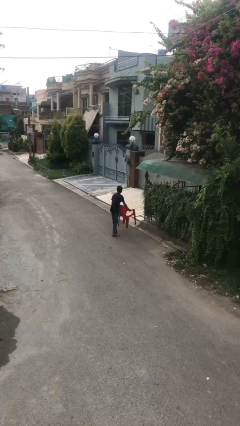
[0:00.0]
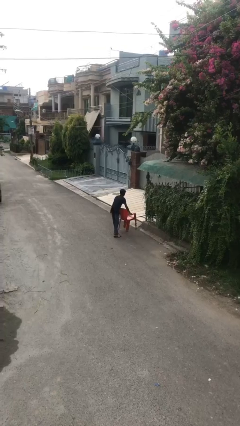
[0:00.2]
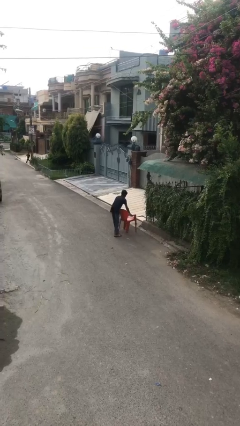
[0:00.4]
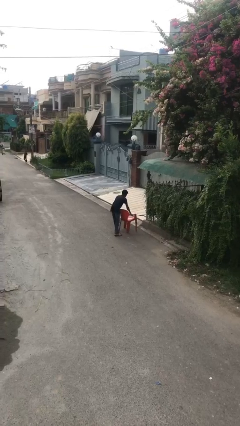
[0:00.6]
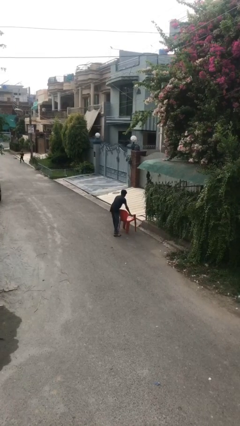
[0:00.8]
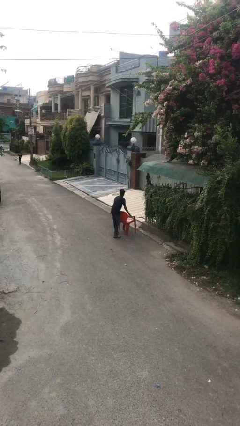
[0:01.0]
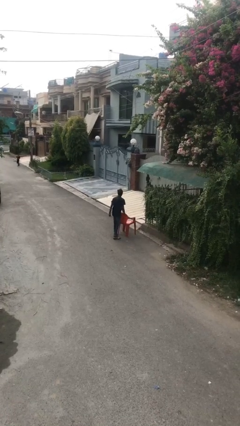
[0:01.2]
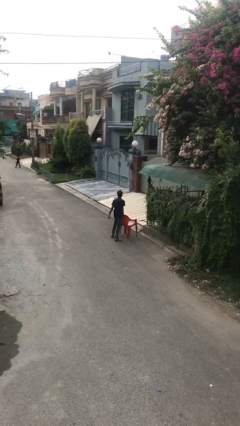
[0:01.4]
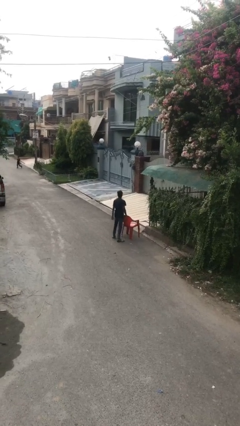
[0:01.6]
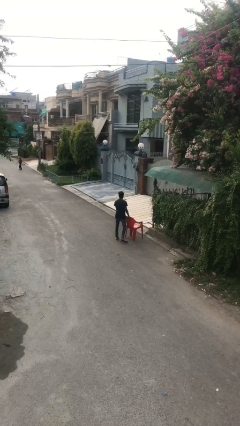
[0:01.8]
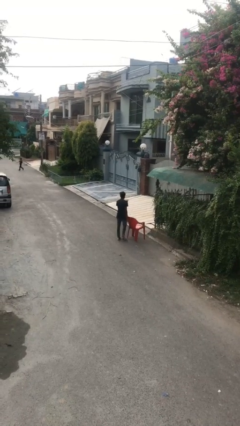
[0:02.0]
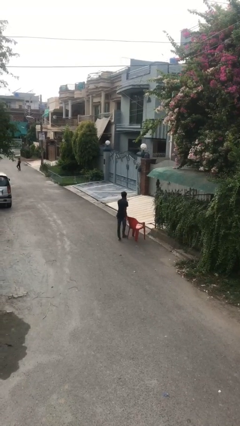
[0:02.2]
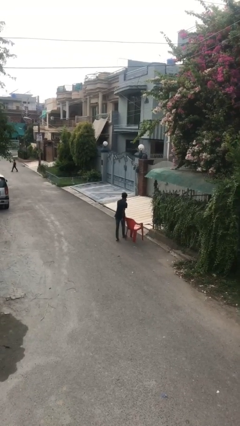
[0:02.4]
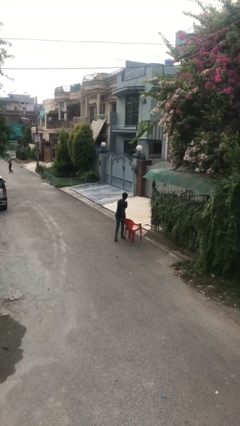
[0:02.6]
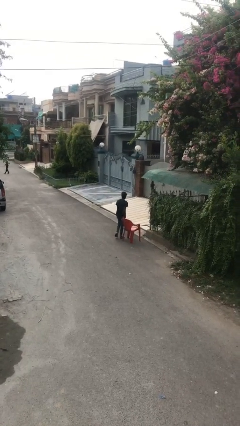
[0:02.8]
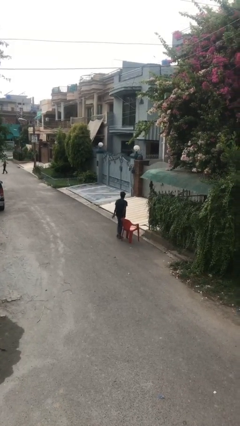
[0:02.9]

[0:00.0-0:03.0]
person puts down object on floor

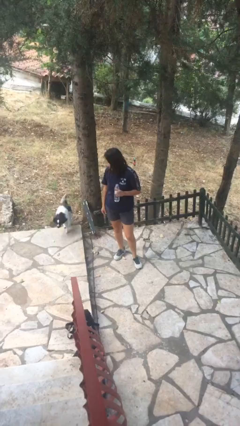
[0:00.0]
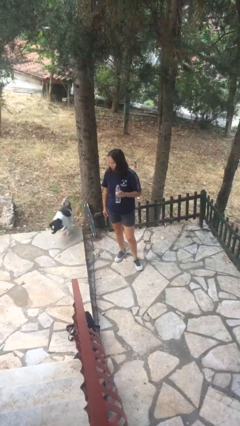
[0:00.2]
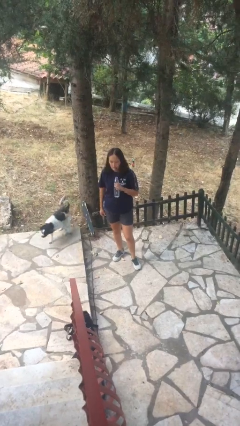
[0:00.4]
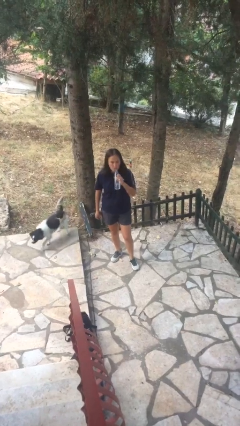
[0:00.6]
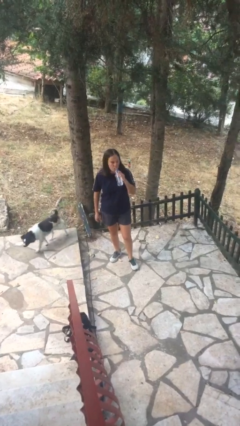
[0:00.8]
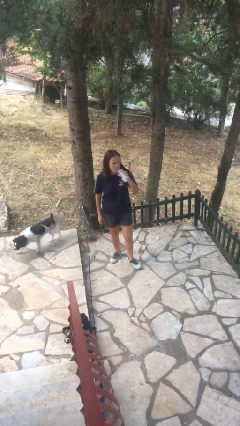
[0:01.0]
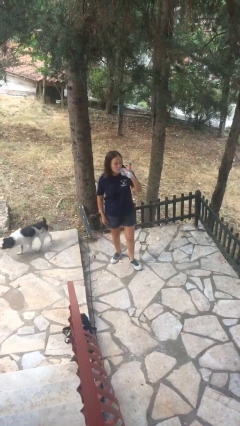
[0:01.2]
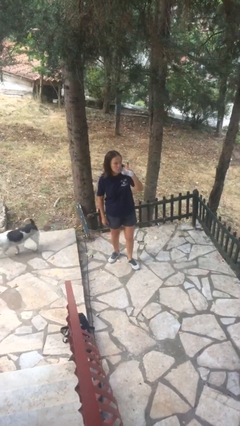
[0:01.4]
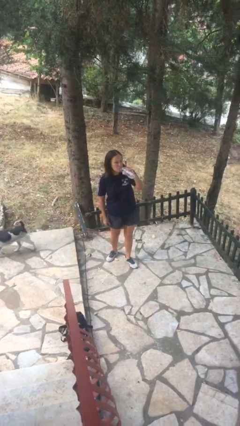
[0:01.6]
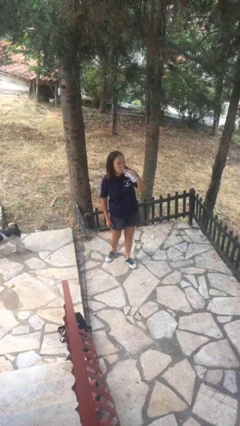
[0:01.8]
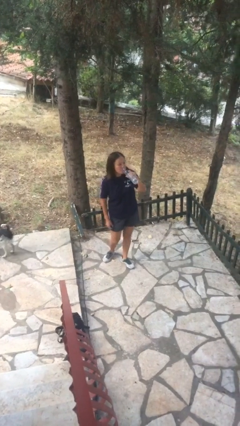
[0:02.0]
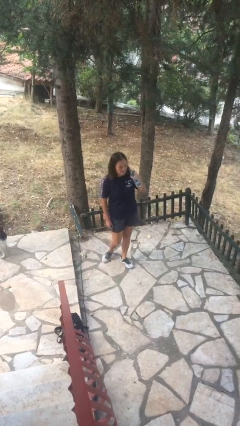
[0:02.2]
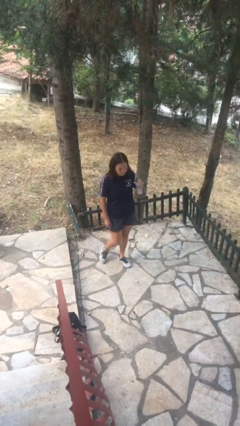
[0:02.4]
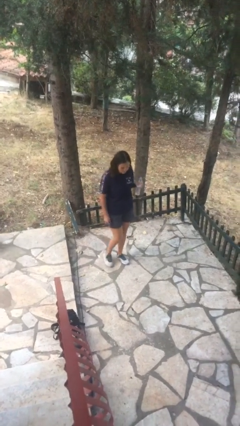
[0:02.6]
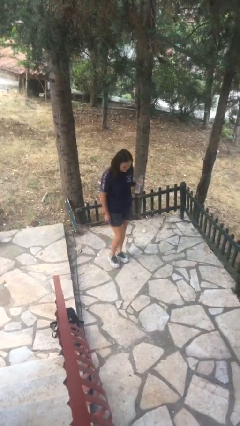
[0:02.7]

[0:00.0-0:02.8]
person drinks from bottle

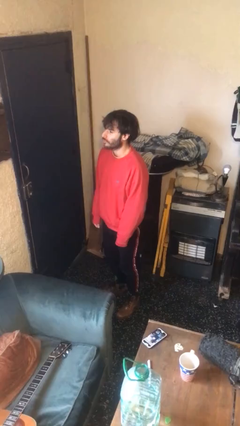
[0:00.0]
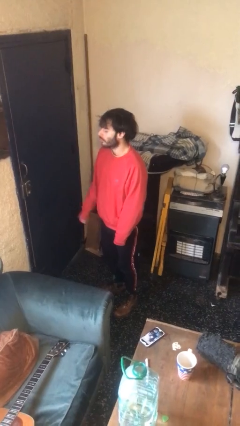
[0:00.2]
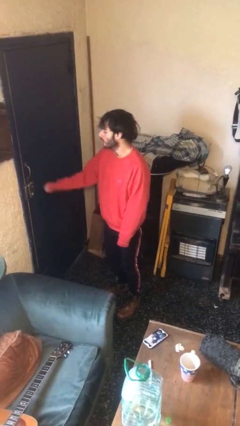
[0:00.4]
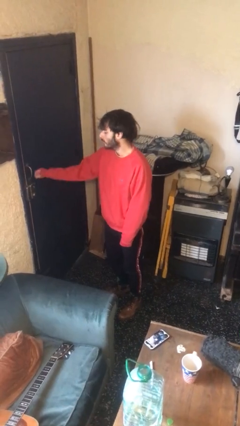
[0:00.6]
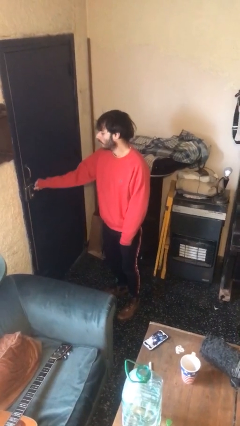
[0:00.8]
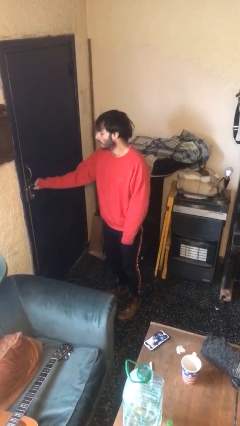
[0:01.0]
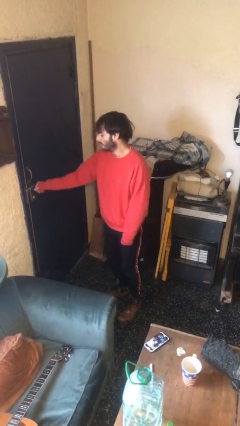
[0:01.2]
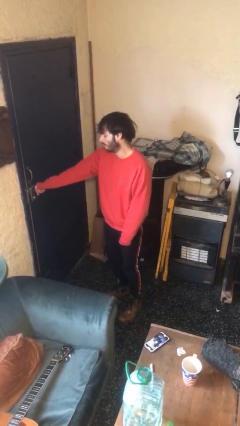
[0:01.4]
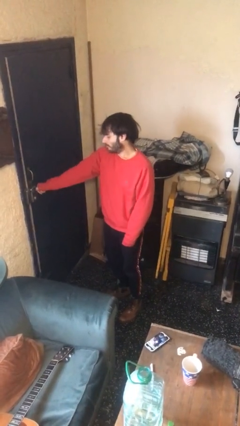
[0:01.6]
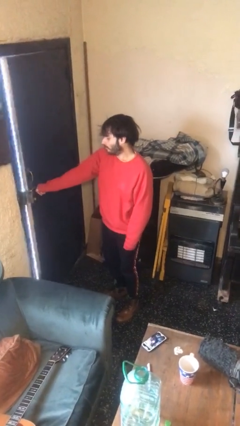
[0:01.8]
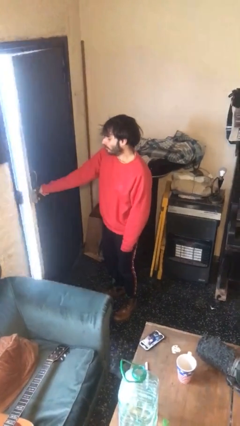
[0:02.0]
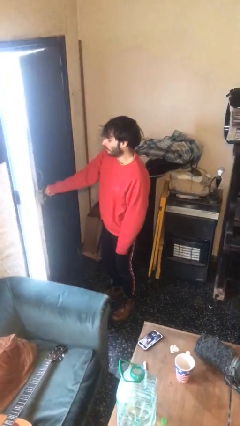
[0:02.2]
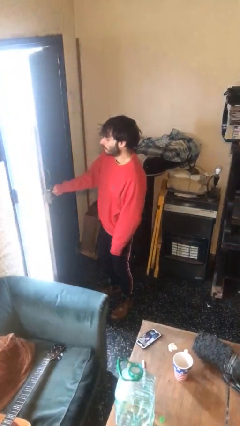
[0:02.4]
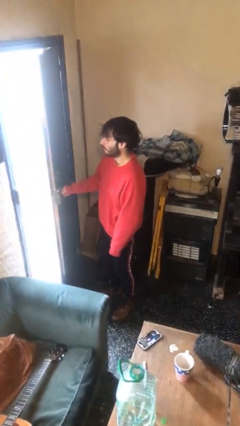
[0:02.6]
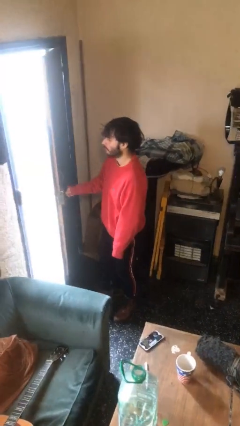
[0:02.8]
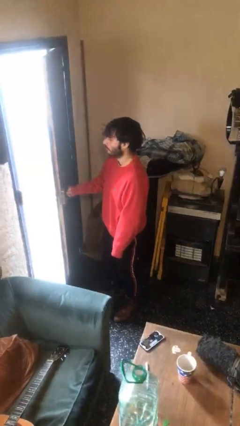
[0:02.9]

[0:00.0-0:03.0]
person opens facility door

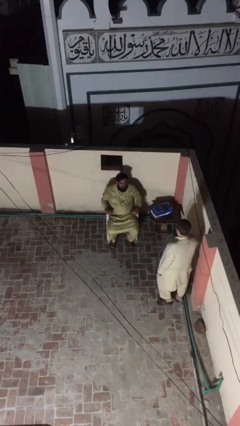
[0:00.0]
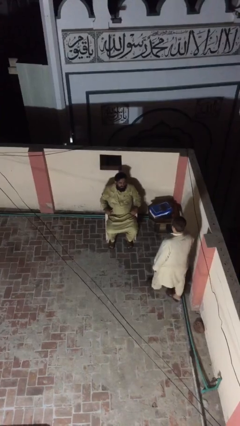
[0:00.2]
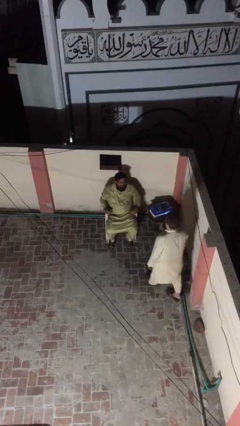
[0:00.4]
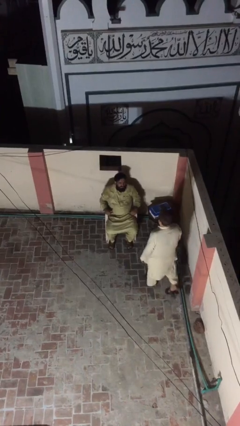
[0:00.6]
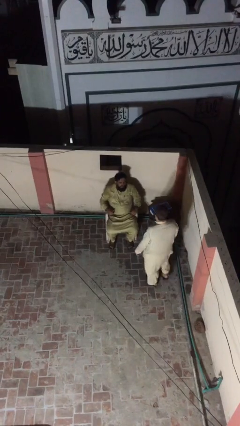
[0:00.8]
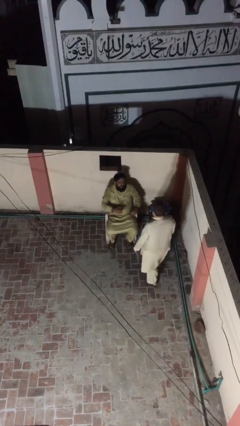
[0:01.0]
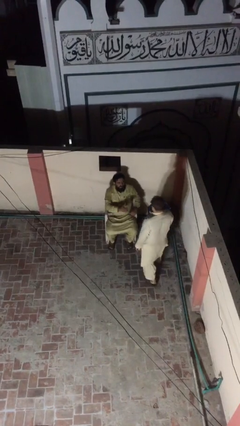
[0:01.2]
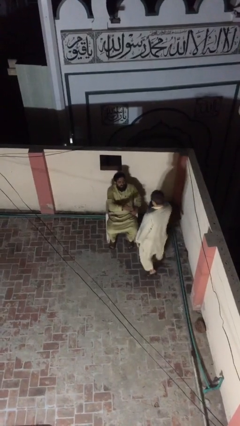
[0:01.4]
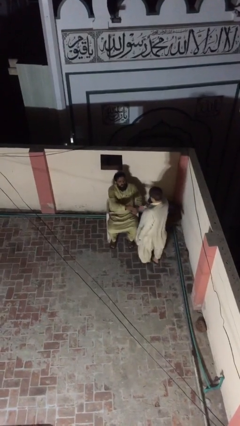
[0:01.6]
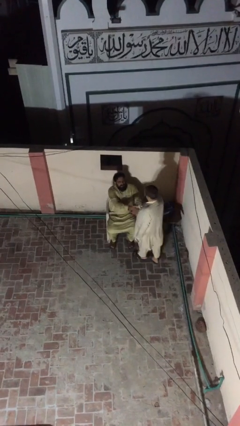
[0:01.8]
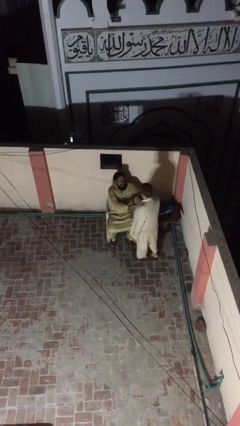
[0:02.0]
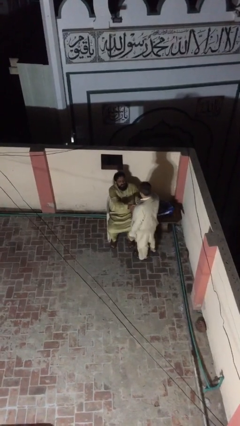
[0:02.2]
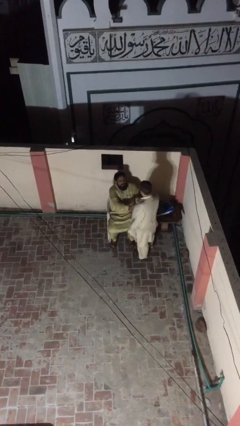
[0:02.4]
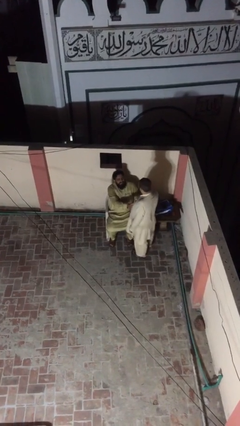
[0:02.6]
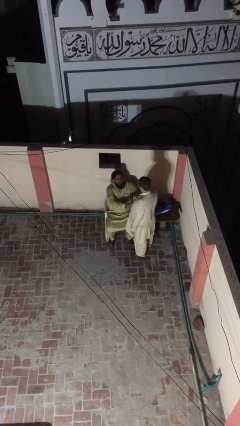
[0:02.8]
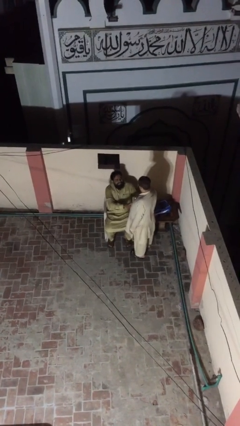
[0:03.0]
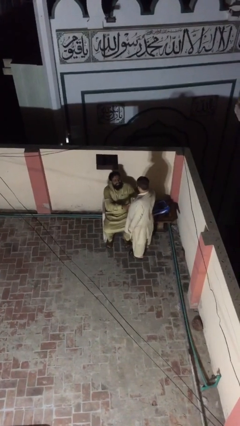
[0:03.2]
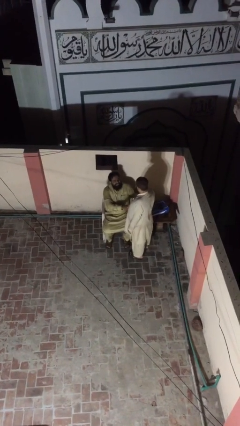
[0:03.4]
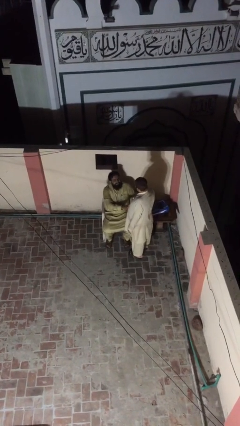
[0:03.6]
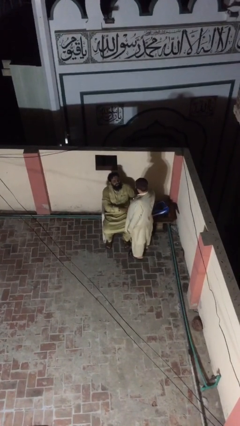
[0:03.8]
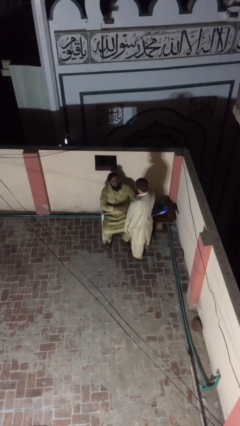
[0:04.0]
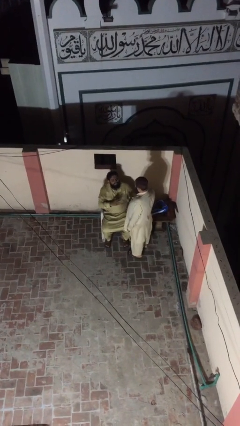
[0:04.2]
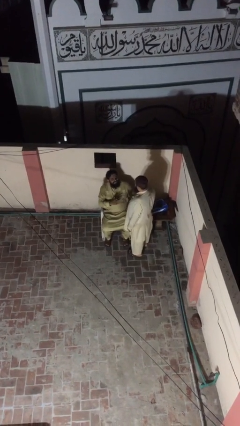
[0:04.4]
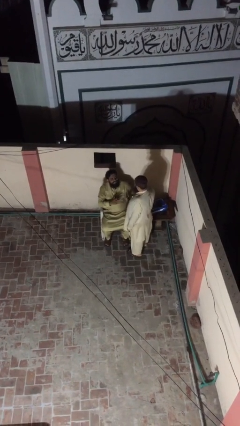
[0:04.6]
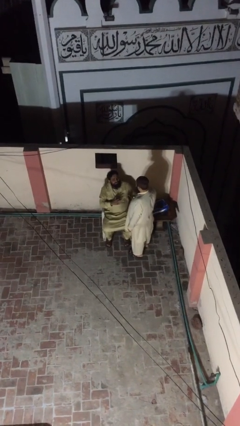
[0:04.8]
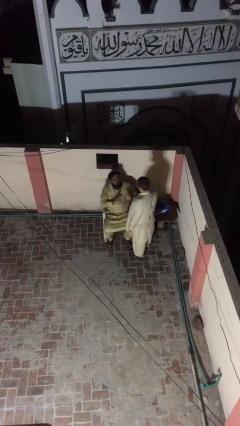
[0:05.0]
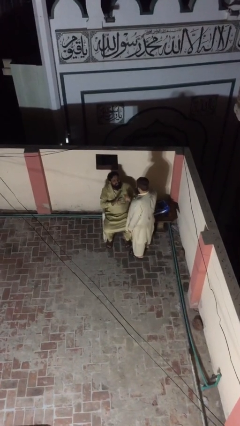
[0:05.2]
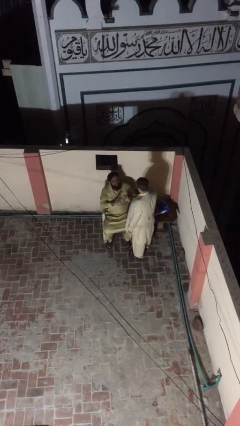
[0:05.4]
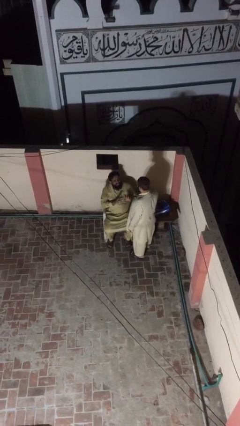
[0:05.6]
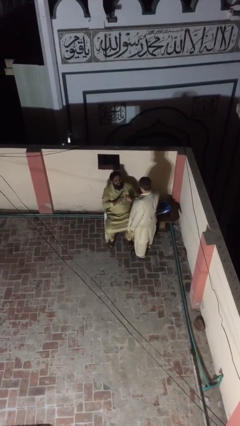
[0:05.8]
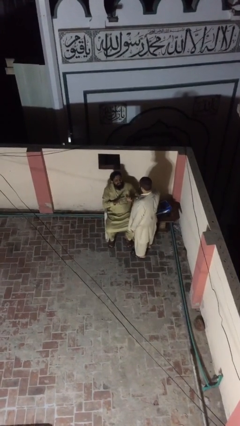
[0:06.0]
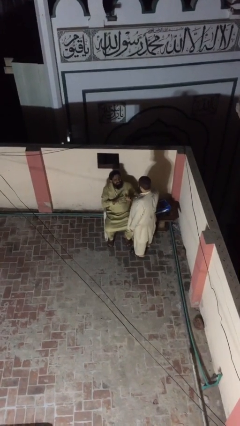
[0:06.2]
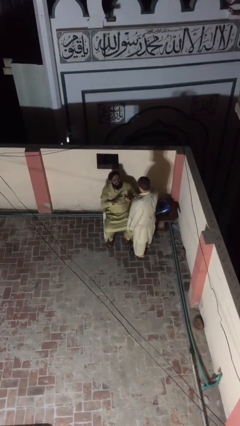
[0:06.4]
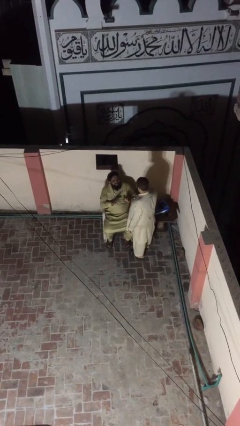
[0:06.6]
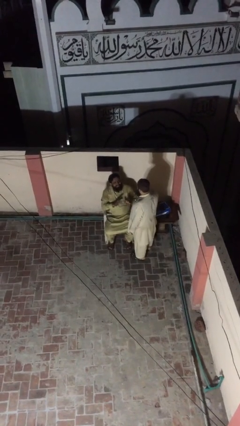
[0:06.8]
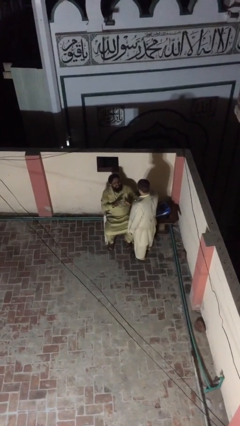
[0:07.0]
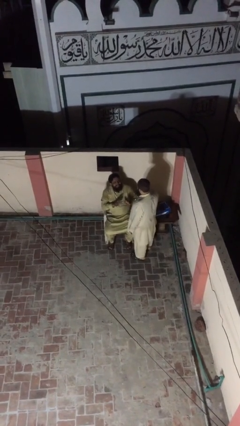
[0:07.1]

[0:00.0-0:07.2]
person shakes hand

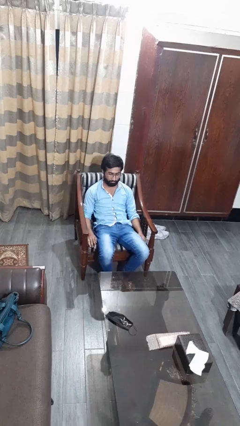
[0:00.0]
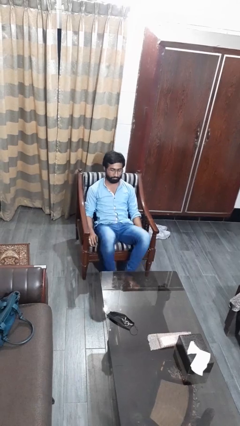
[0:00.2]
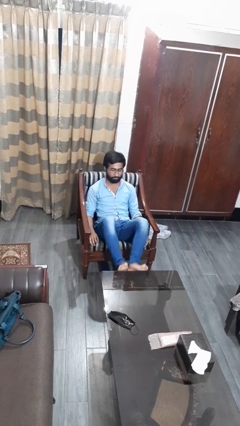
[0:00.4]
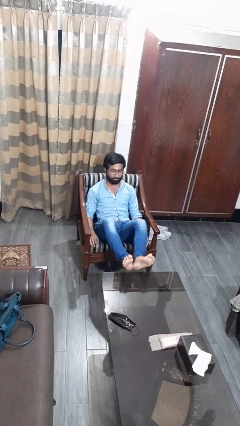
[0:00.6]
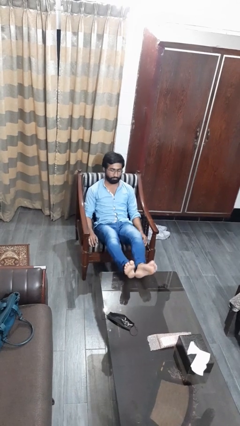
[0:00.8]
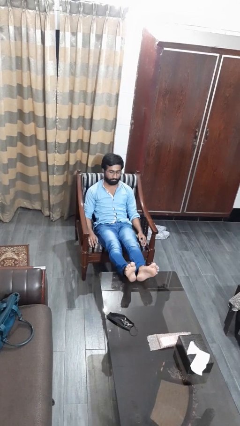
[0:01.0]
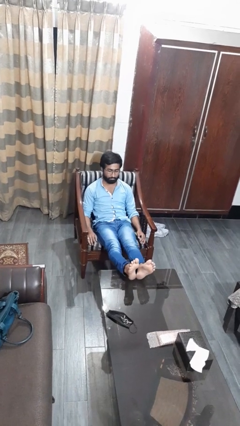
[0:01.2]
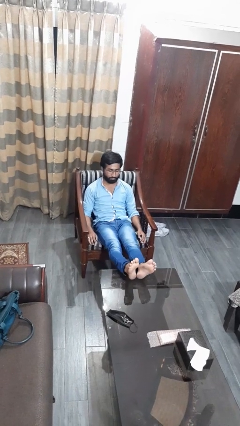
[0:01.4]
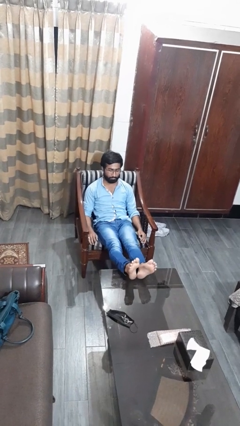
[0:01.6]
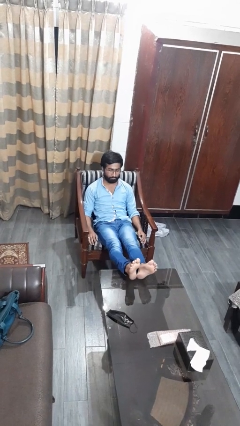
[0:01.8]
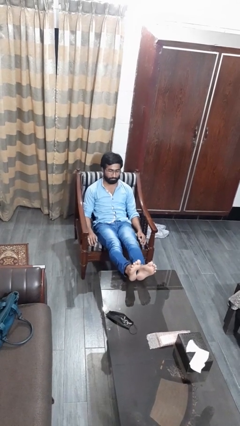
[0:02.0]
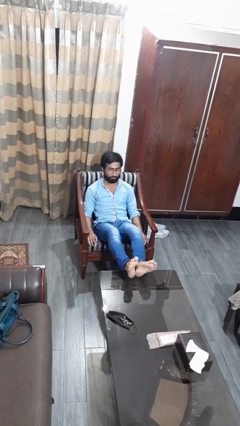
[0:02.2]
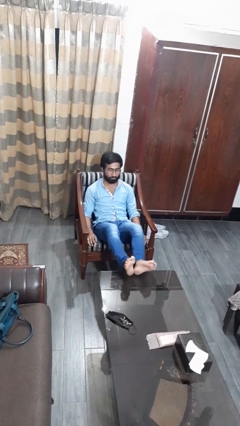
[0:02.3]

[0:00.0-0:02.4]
person puts feet up
